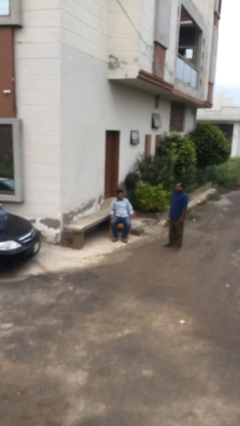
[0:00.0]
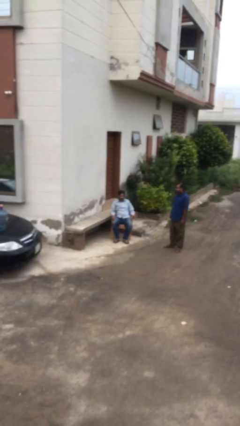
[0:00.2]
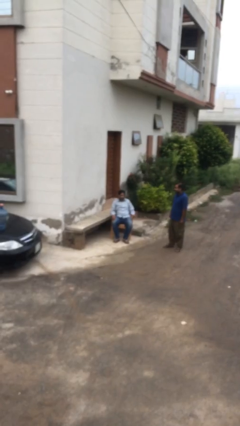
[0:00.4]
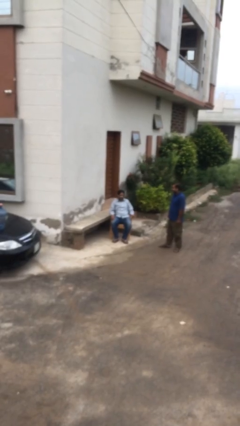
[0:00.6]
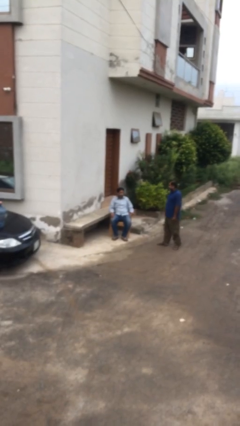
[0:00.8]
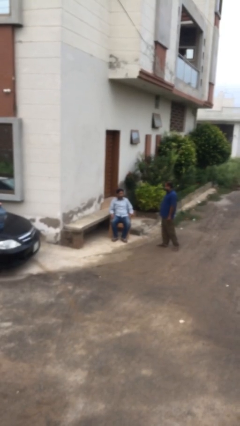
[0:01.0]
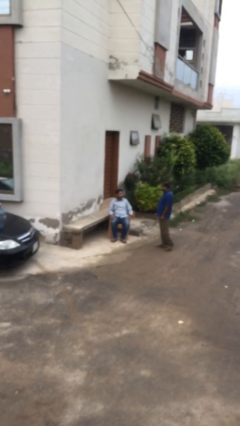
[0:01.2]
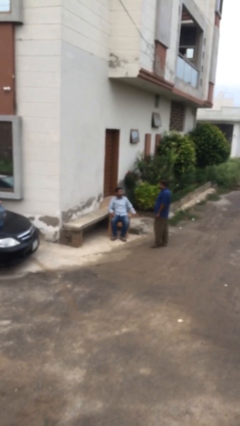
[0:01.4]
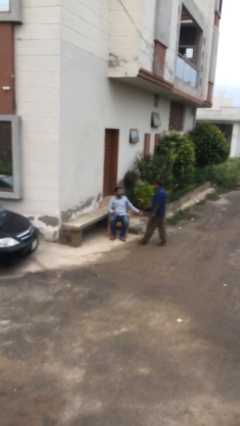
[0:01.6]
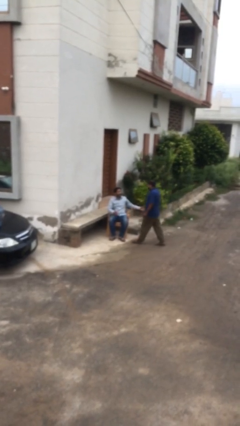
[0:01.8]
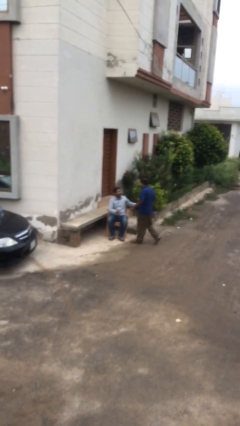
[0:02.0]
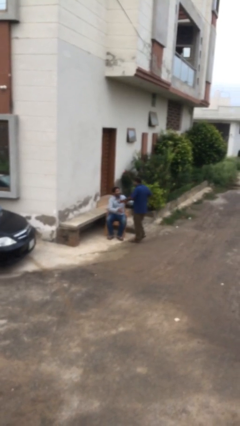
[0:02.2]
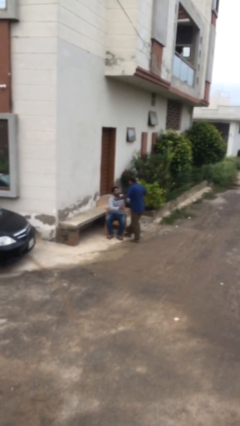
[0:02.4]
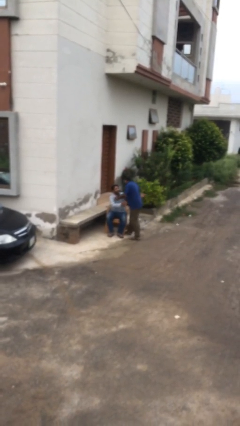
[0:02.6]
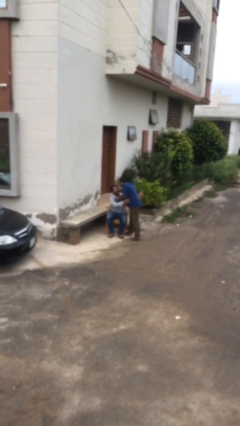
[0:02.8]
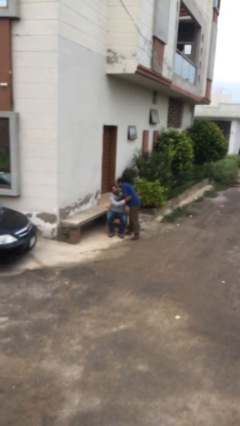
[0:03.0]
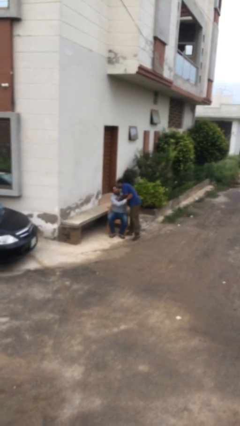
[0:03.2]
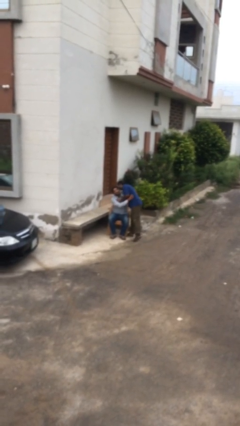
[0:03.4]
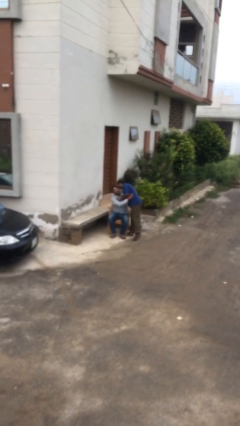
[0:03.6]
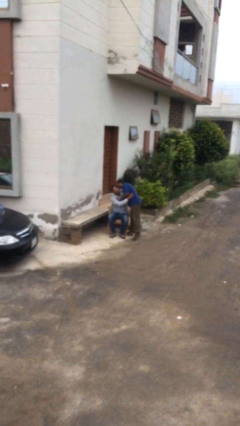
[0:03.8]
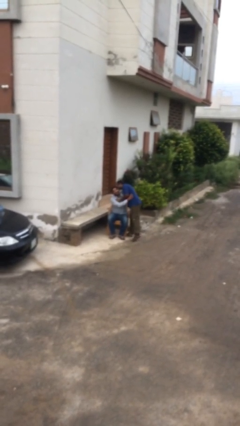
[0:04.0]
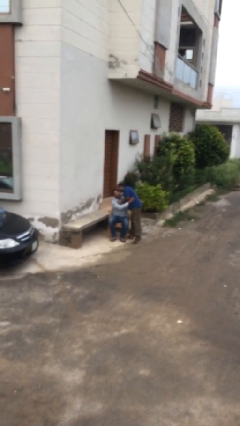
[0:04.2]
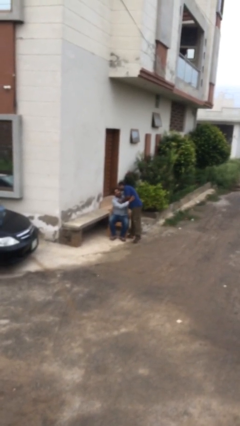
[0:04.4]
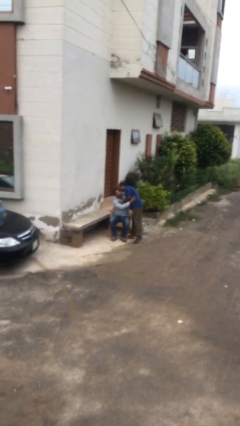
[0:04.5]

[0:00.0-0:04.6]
person embraces person

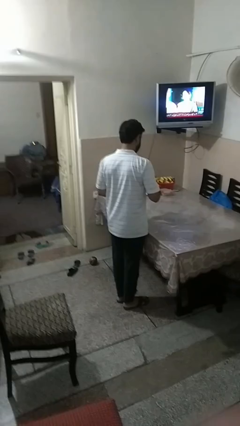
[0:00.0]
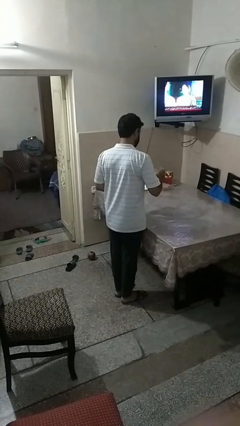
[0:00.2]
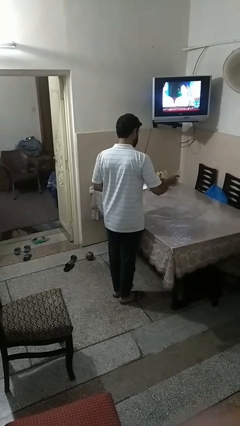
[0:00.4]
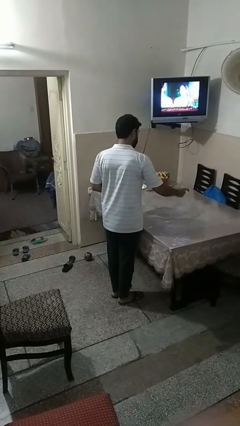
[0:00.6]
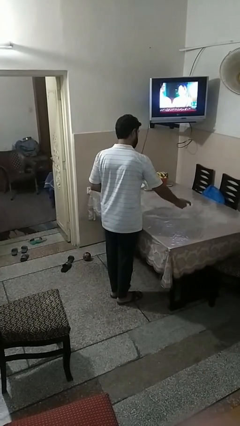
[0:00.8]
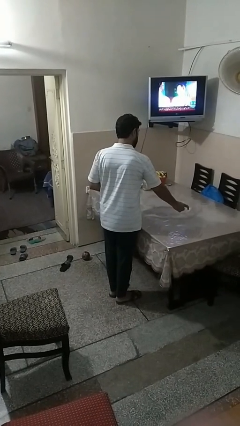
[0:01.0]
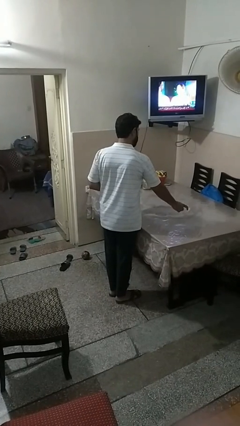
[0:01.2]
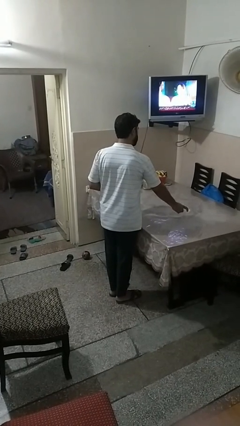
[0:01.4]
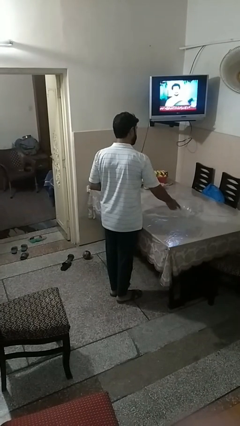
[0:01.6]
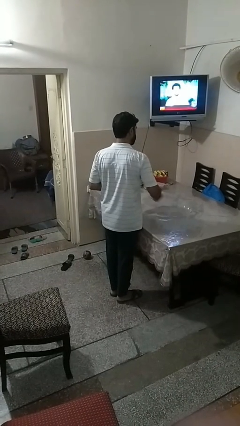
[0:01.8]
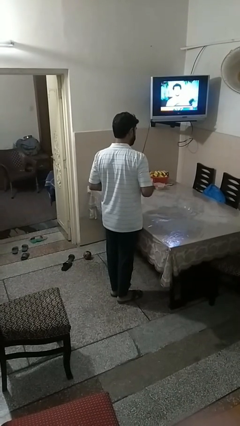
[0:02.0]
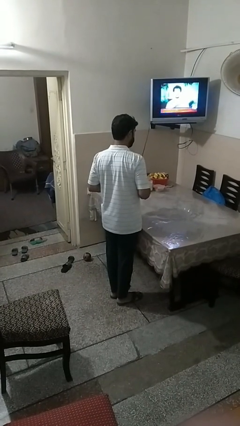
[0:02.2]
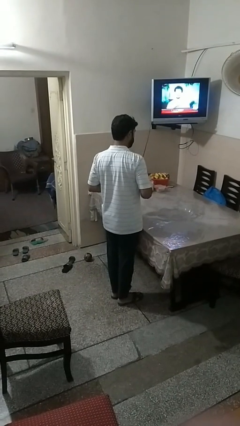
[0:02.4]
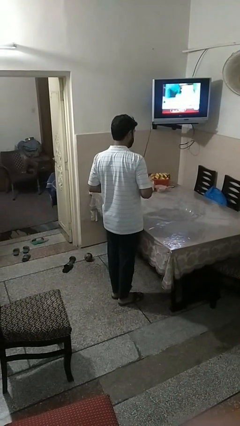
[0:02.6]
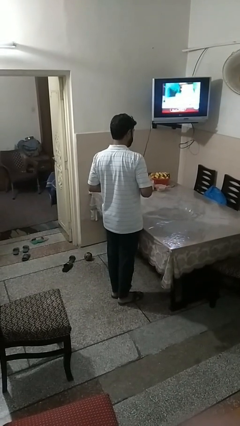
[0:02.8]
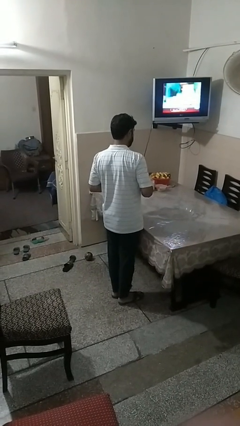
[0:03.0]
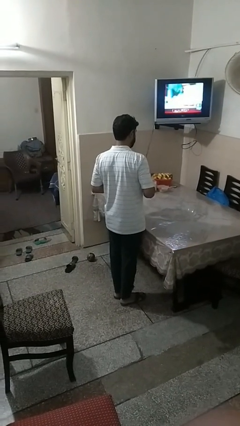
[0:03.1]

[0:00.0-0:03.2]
person sets table

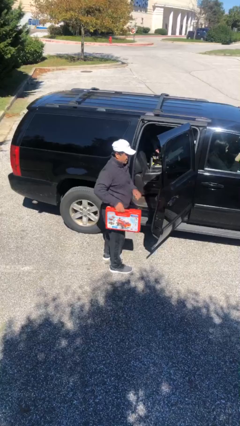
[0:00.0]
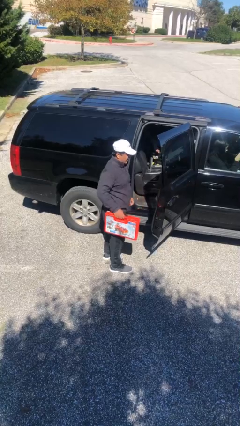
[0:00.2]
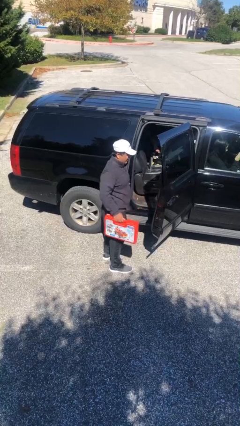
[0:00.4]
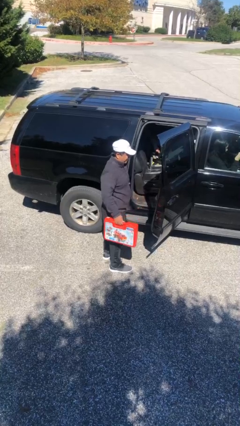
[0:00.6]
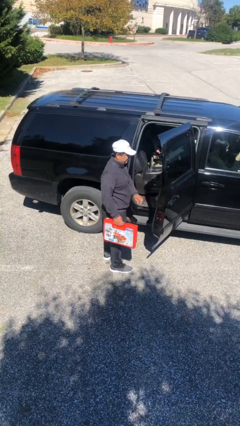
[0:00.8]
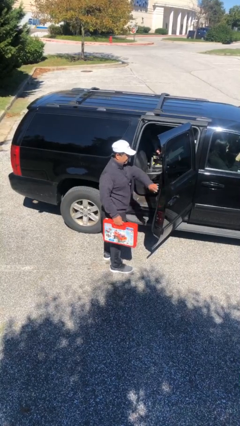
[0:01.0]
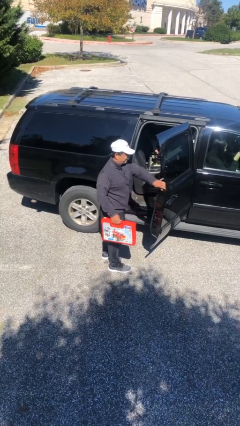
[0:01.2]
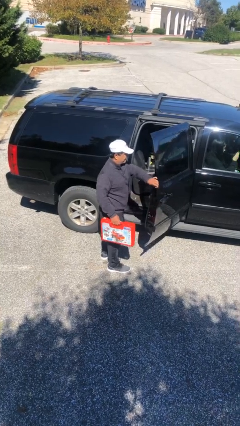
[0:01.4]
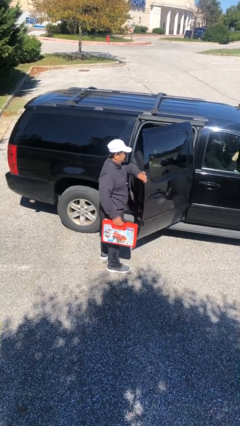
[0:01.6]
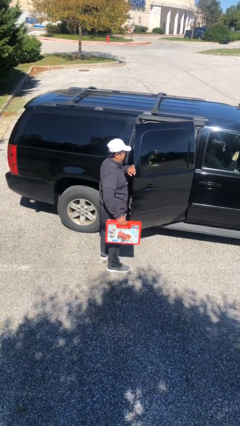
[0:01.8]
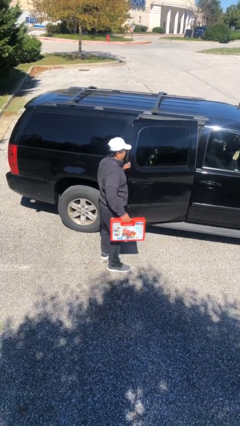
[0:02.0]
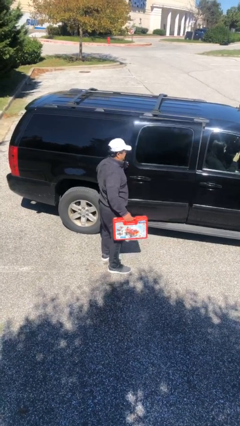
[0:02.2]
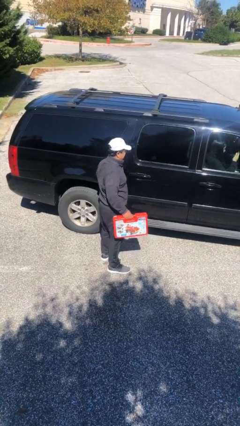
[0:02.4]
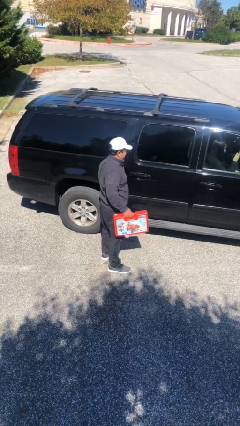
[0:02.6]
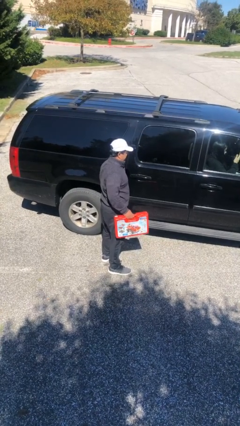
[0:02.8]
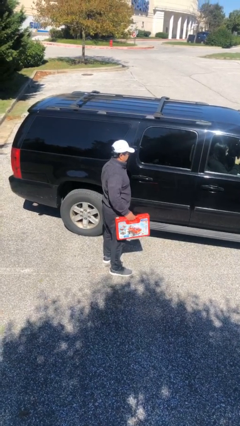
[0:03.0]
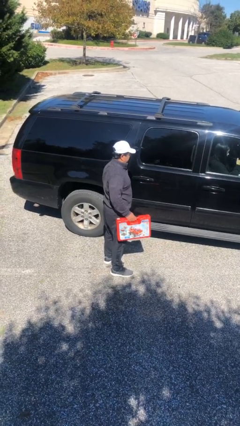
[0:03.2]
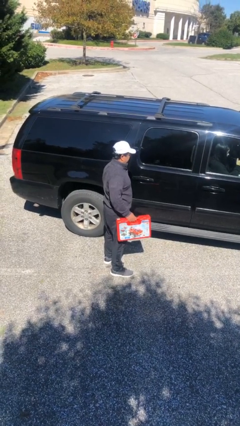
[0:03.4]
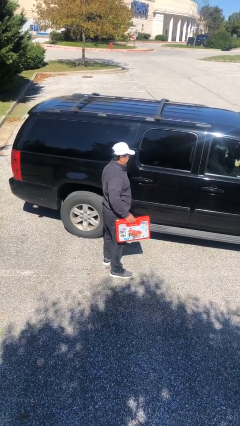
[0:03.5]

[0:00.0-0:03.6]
person closes car door

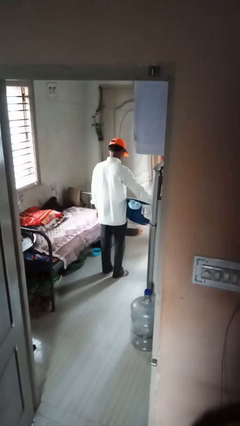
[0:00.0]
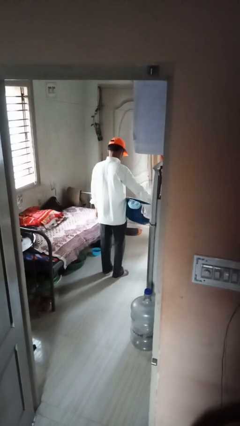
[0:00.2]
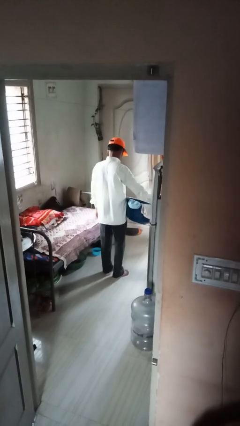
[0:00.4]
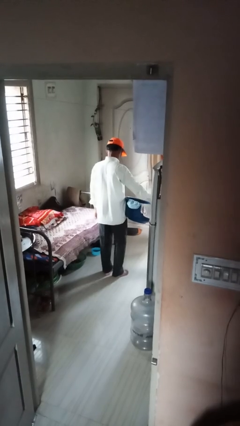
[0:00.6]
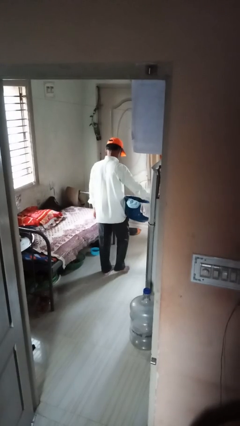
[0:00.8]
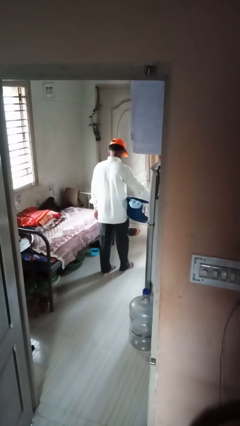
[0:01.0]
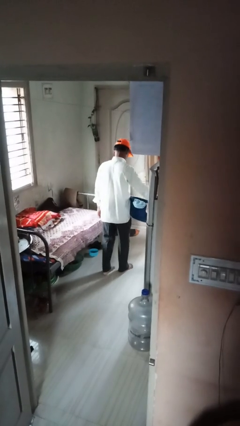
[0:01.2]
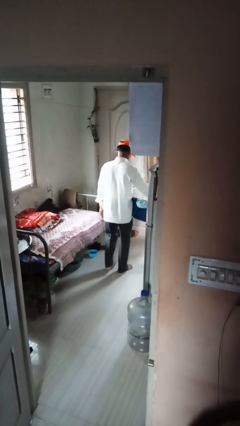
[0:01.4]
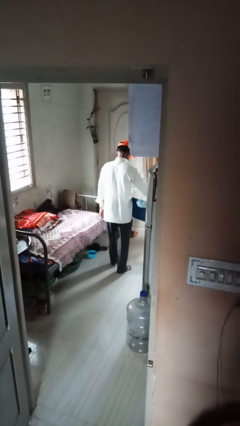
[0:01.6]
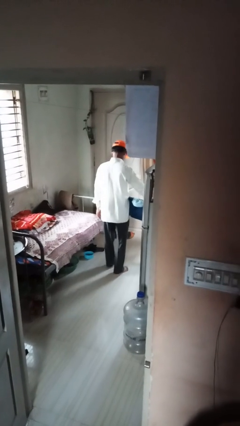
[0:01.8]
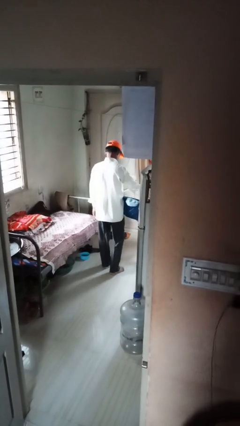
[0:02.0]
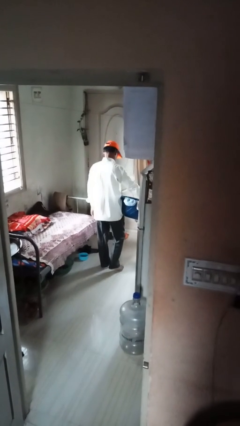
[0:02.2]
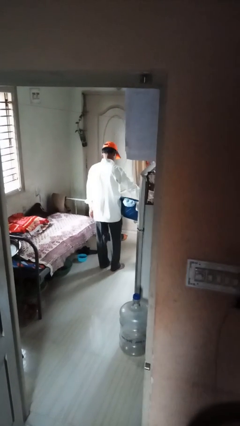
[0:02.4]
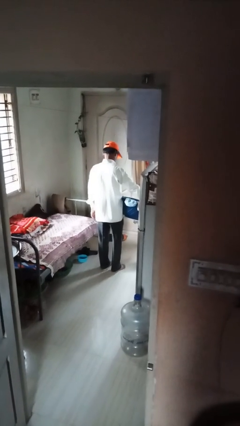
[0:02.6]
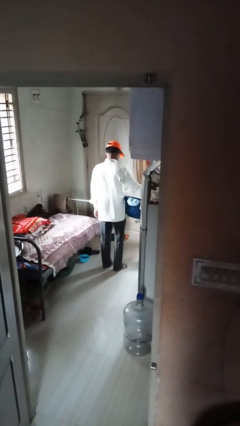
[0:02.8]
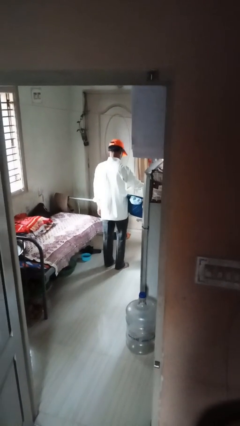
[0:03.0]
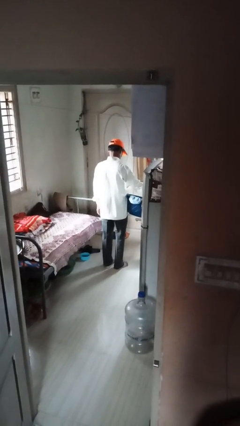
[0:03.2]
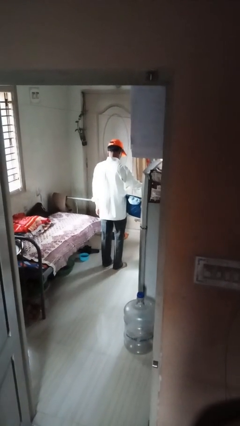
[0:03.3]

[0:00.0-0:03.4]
person carries laundry basket

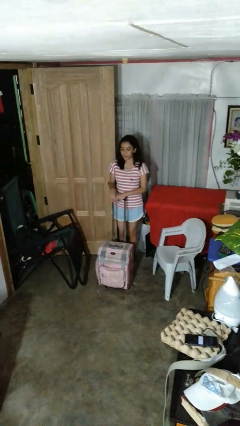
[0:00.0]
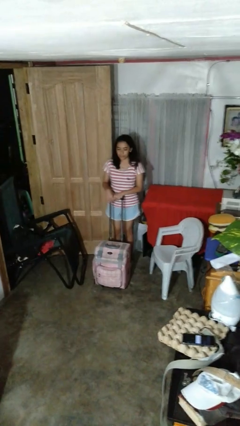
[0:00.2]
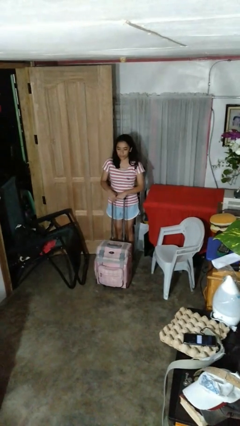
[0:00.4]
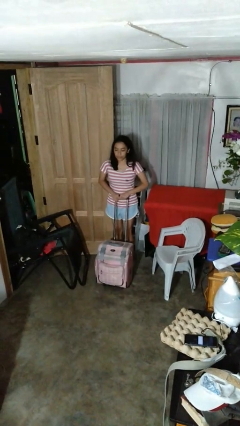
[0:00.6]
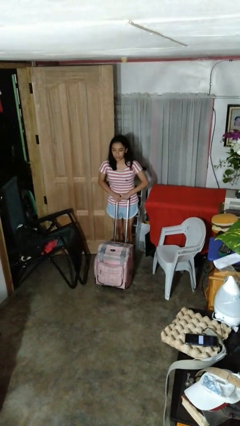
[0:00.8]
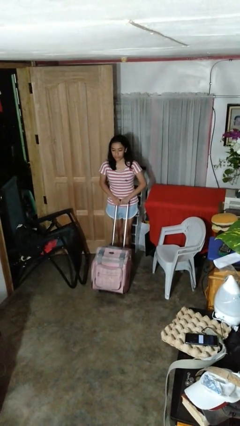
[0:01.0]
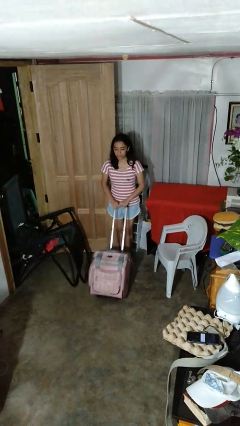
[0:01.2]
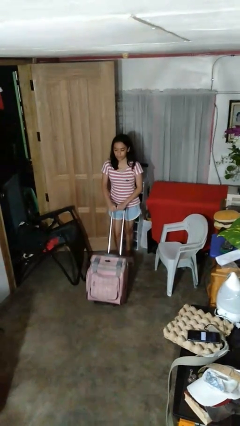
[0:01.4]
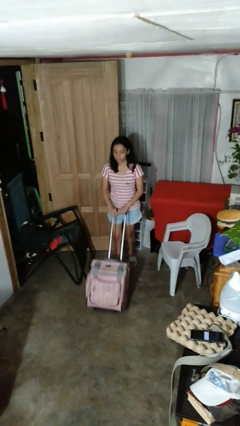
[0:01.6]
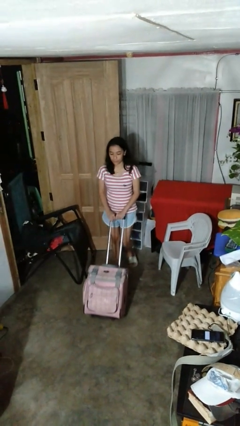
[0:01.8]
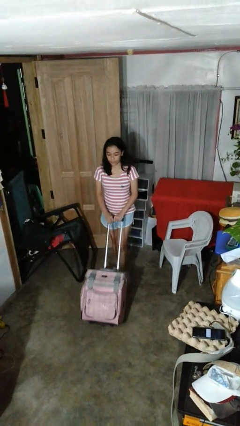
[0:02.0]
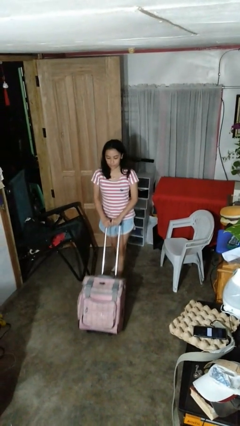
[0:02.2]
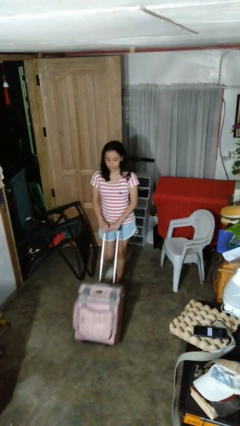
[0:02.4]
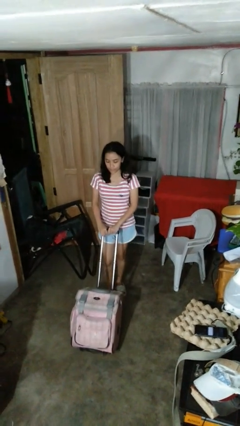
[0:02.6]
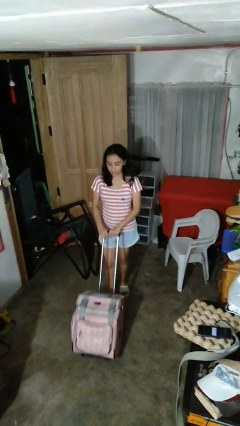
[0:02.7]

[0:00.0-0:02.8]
person pushes wheeled cart
